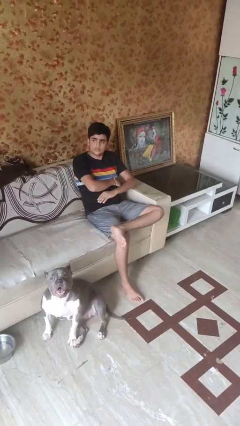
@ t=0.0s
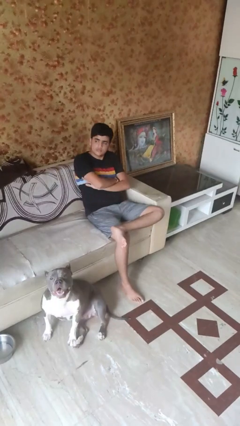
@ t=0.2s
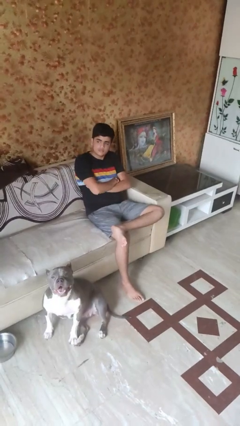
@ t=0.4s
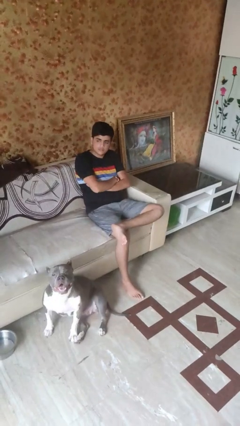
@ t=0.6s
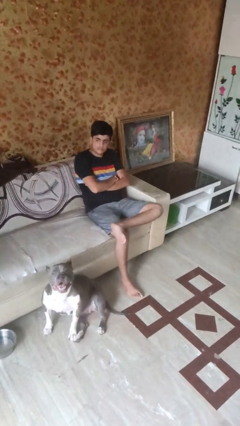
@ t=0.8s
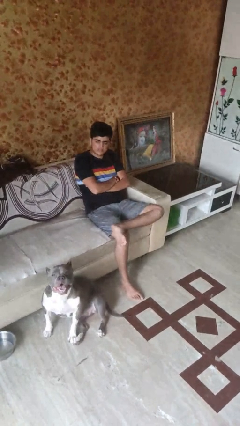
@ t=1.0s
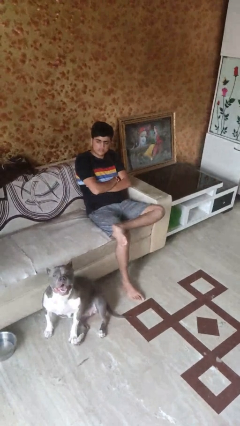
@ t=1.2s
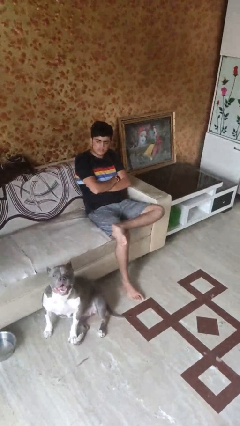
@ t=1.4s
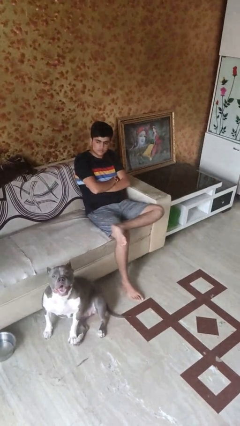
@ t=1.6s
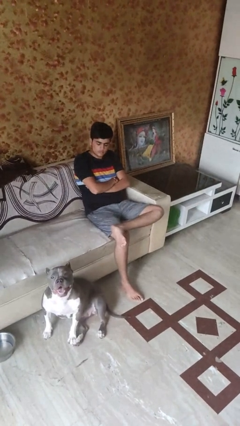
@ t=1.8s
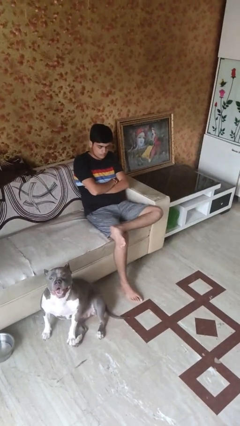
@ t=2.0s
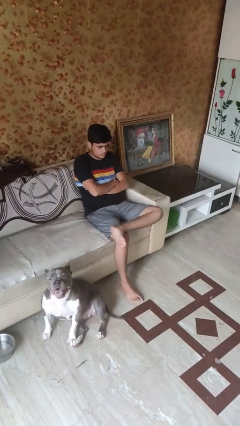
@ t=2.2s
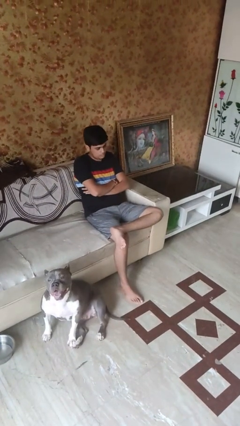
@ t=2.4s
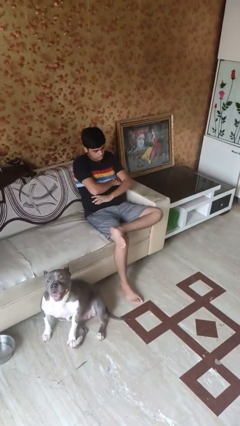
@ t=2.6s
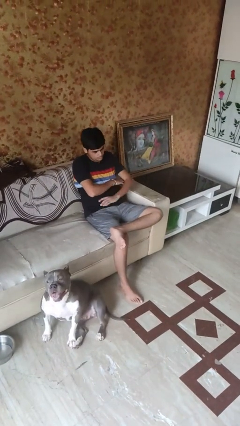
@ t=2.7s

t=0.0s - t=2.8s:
person crosses arms

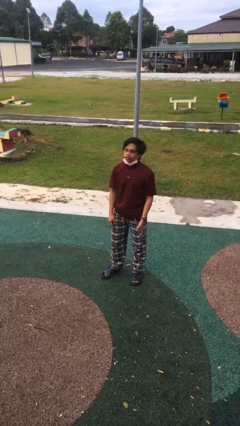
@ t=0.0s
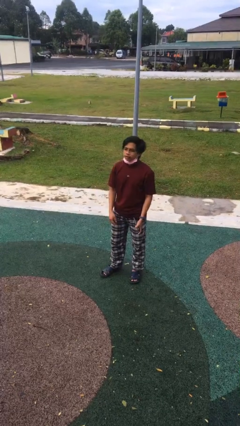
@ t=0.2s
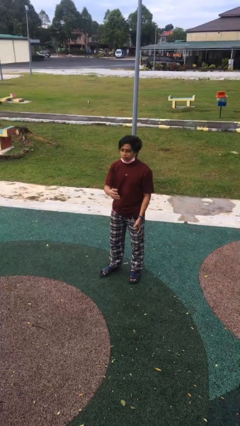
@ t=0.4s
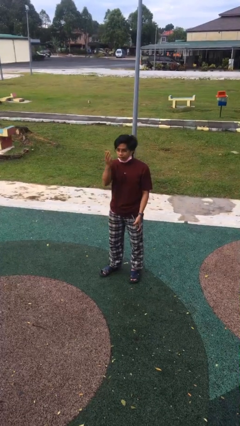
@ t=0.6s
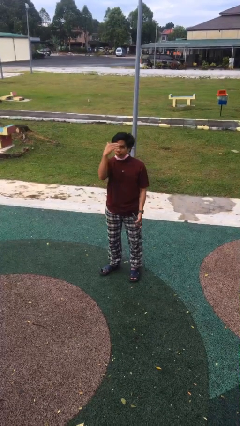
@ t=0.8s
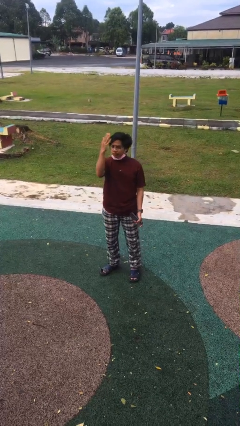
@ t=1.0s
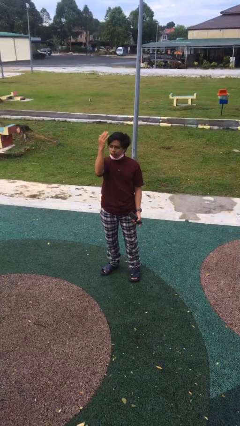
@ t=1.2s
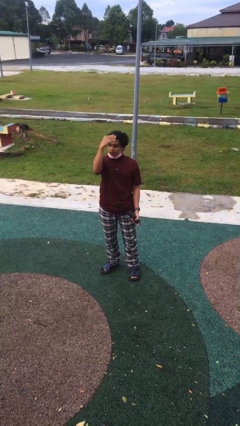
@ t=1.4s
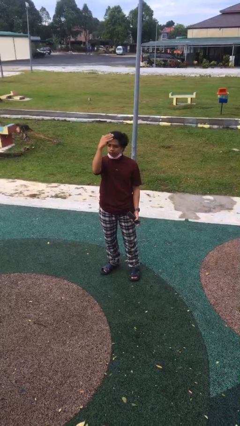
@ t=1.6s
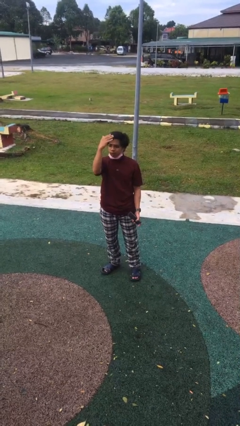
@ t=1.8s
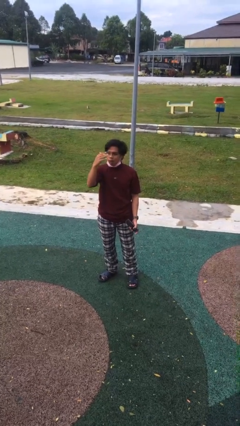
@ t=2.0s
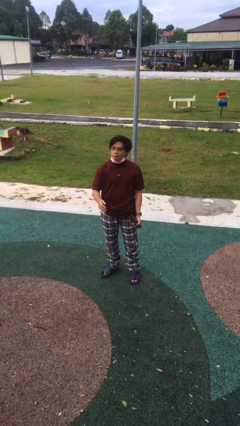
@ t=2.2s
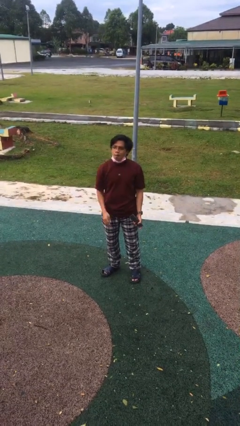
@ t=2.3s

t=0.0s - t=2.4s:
person gestures come here

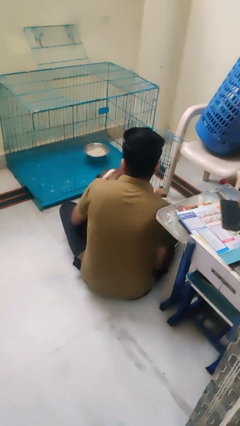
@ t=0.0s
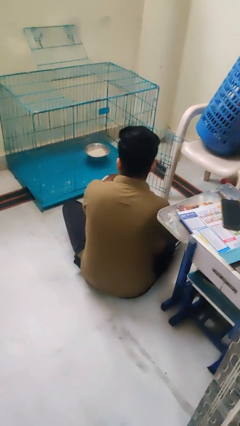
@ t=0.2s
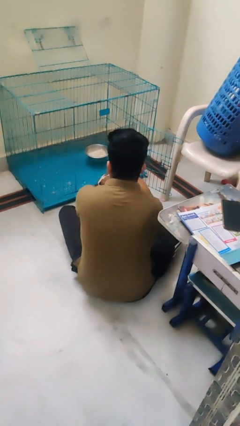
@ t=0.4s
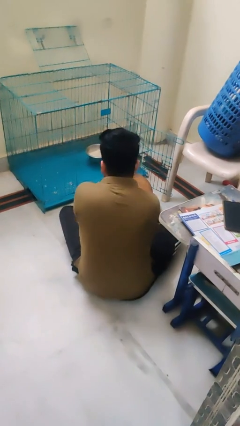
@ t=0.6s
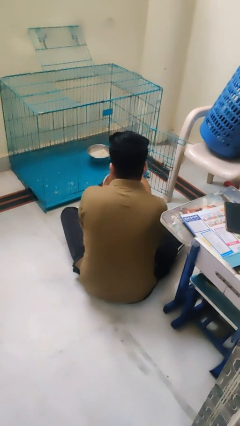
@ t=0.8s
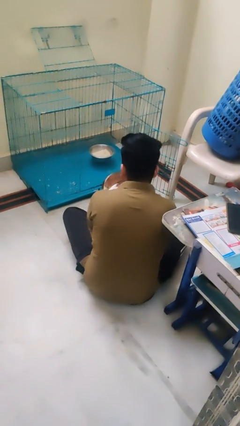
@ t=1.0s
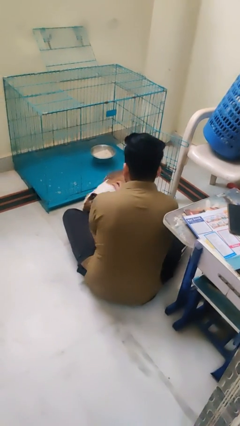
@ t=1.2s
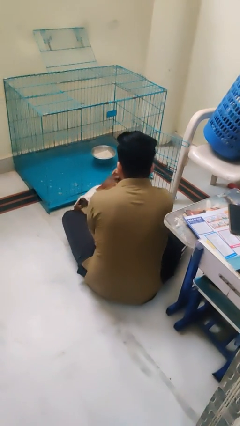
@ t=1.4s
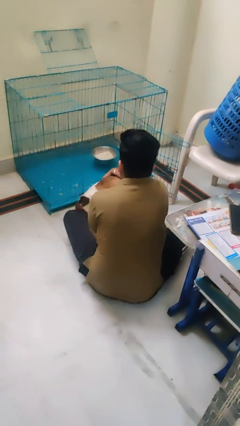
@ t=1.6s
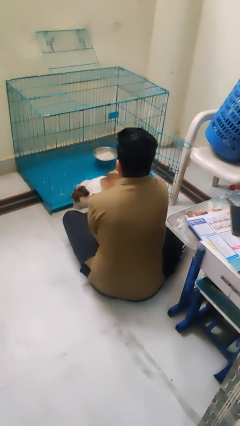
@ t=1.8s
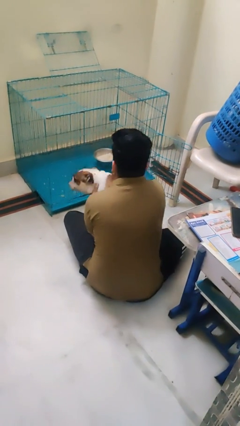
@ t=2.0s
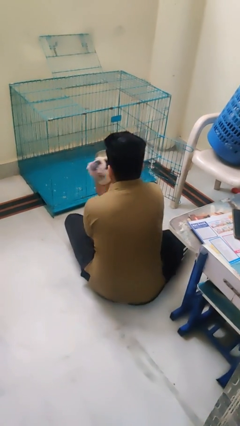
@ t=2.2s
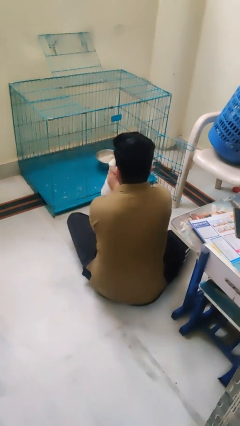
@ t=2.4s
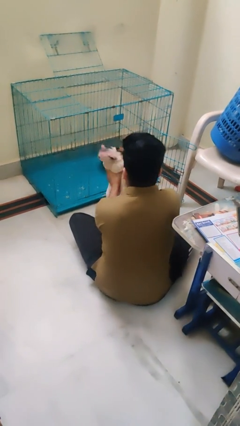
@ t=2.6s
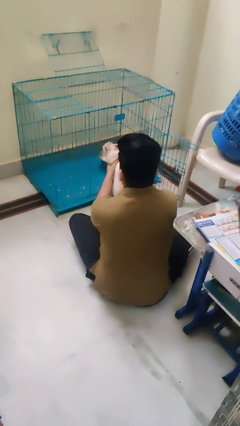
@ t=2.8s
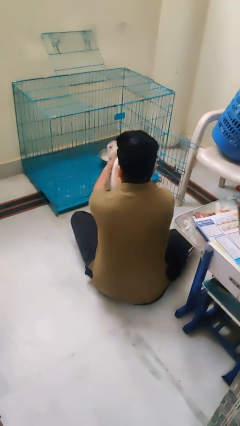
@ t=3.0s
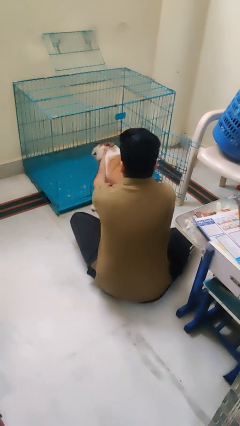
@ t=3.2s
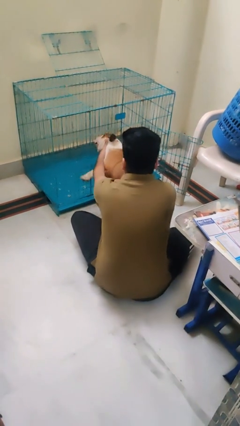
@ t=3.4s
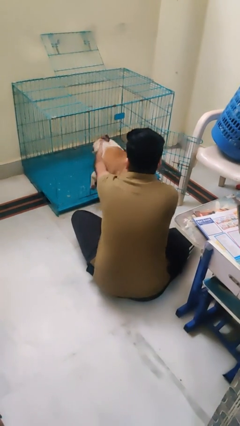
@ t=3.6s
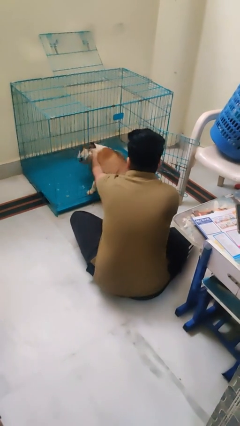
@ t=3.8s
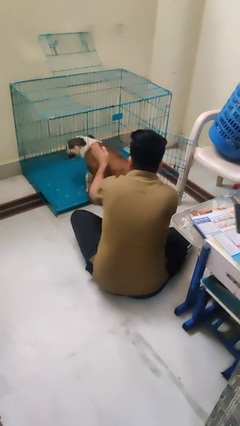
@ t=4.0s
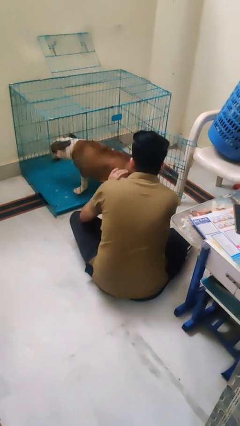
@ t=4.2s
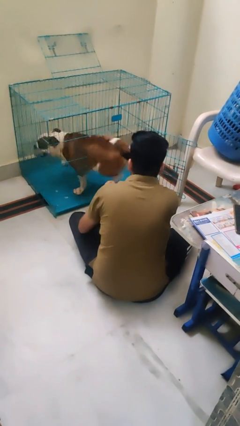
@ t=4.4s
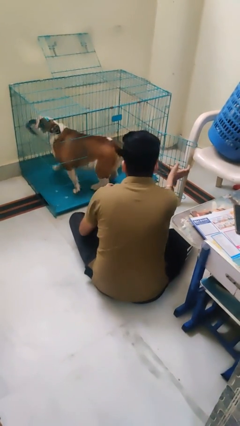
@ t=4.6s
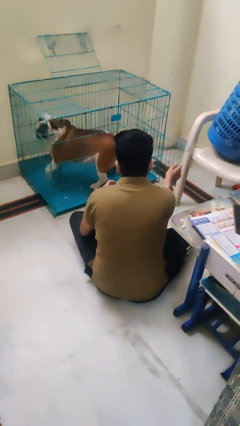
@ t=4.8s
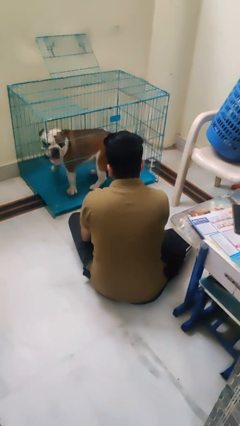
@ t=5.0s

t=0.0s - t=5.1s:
person crates dog

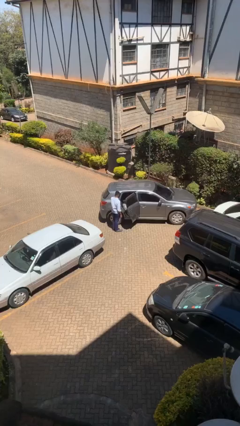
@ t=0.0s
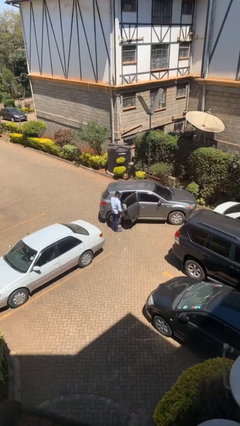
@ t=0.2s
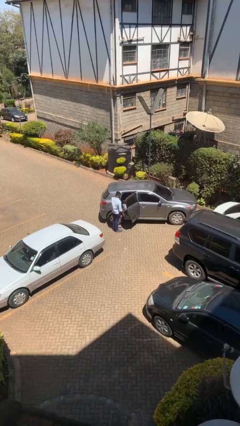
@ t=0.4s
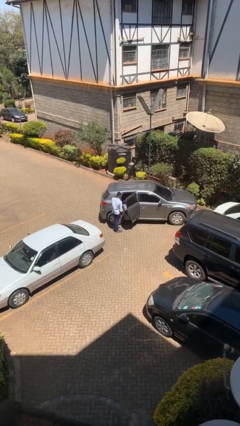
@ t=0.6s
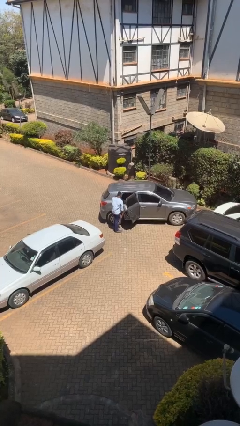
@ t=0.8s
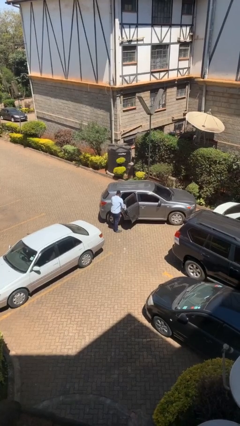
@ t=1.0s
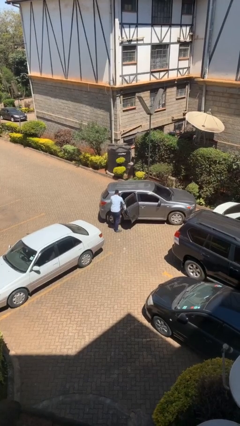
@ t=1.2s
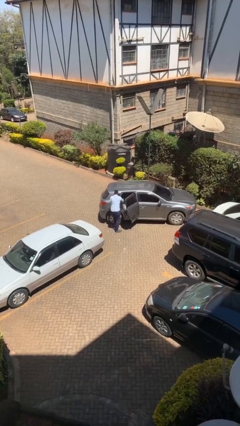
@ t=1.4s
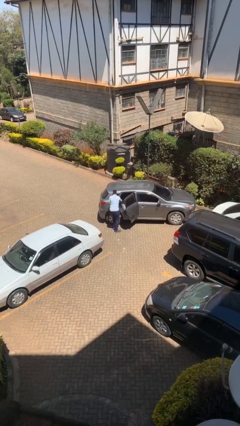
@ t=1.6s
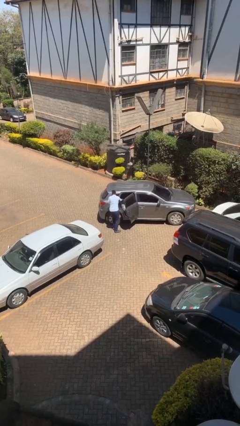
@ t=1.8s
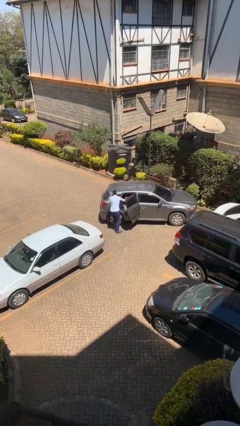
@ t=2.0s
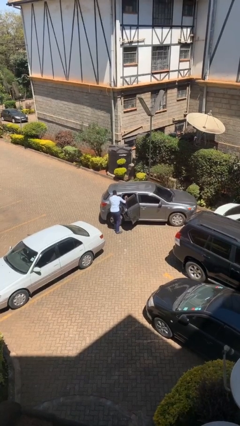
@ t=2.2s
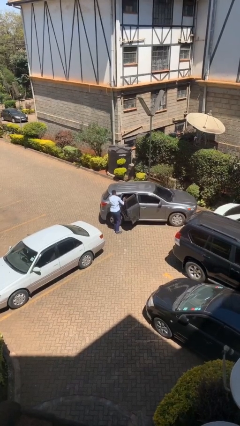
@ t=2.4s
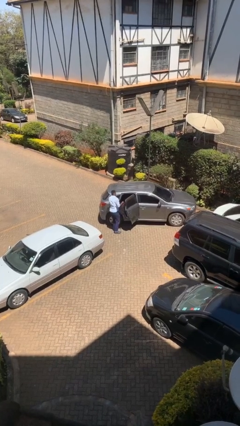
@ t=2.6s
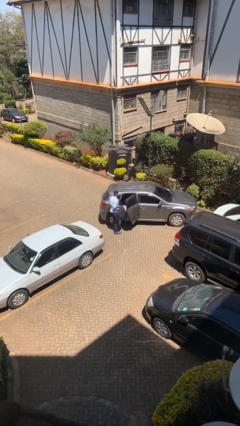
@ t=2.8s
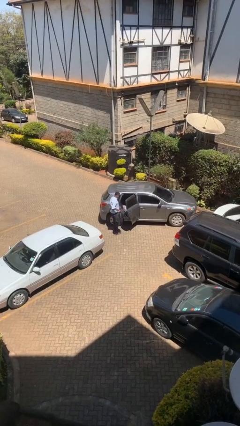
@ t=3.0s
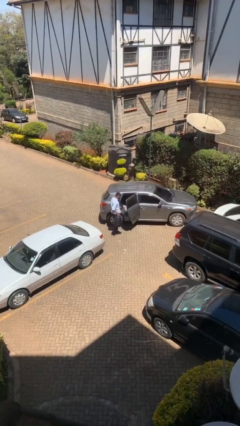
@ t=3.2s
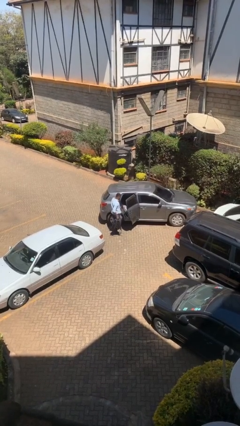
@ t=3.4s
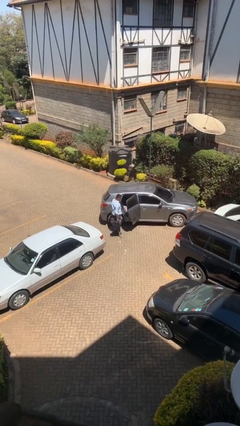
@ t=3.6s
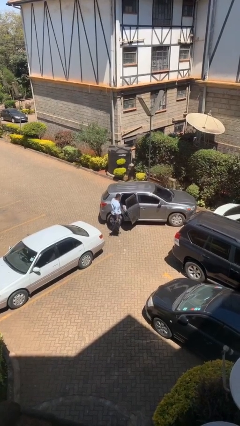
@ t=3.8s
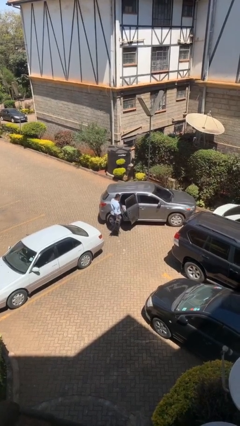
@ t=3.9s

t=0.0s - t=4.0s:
person unloads car

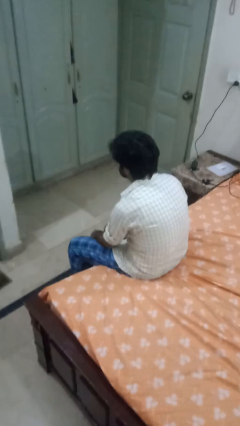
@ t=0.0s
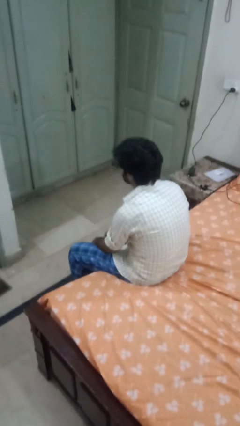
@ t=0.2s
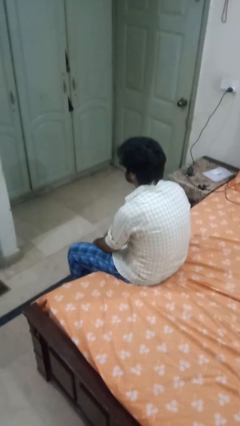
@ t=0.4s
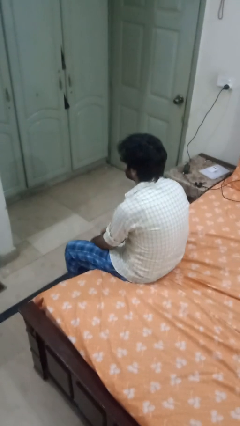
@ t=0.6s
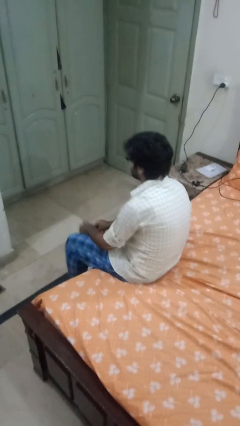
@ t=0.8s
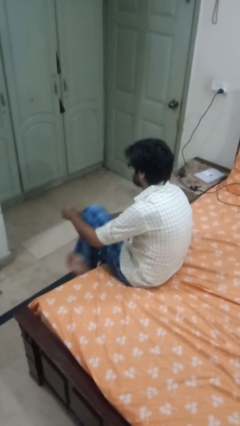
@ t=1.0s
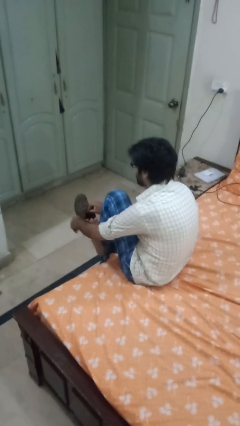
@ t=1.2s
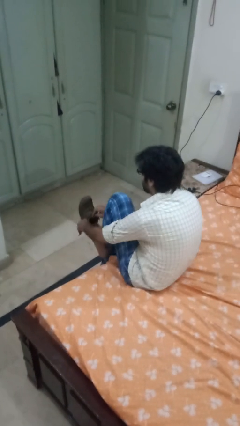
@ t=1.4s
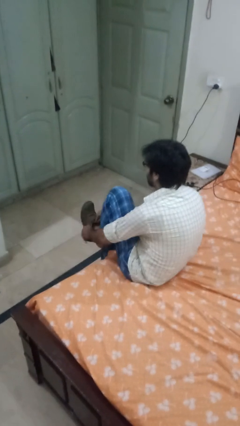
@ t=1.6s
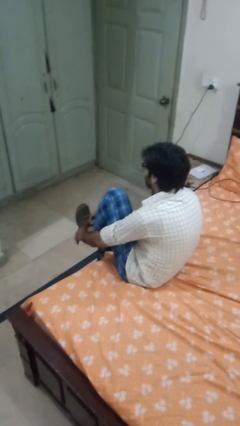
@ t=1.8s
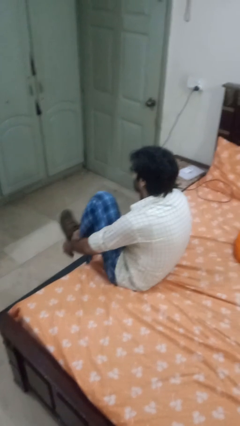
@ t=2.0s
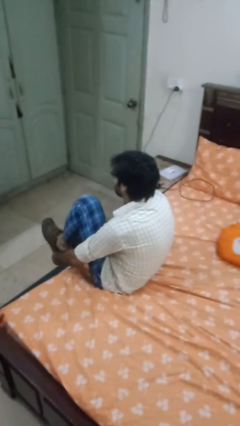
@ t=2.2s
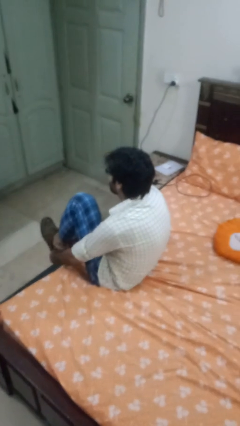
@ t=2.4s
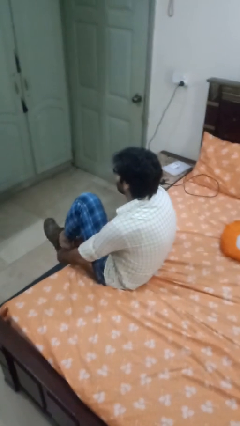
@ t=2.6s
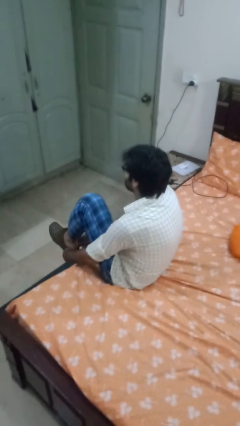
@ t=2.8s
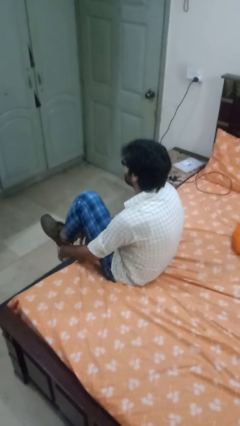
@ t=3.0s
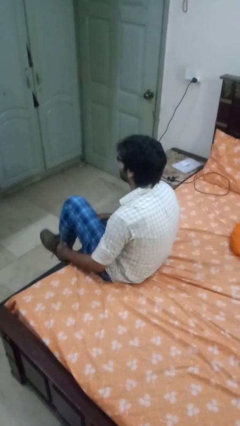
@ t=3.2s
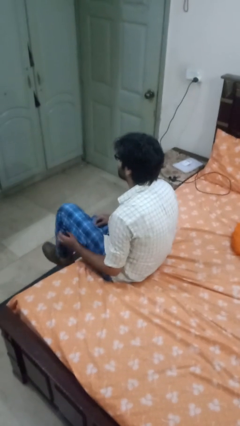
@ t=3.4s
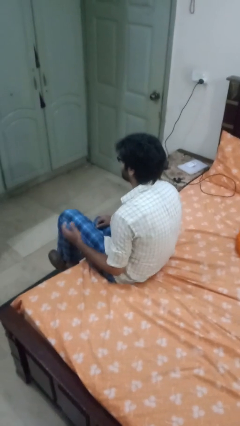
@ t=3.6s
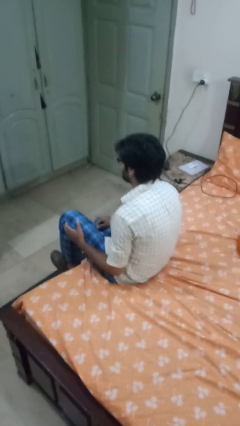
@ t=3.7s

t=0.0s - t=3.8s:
person puts on shoes
